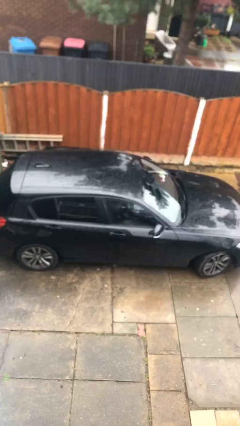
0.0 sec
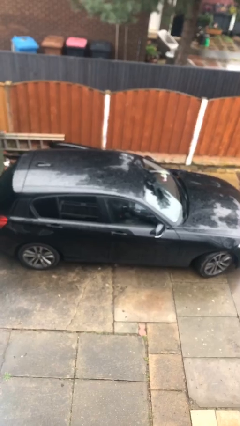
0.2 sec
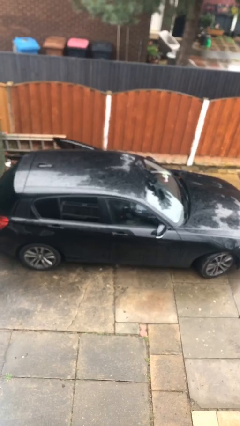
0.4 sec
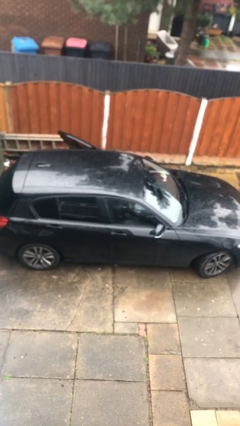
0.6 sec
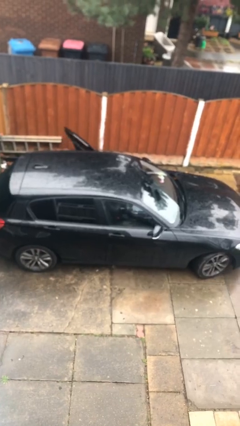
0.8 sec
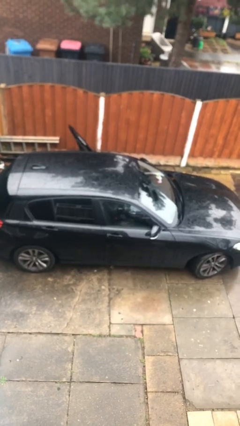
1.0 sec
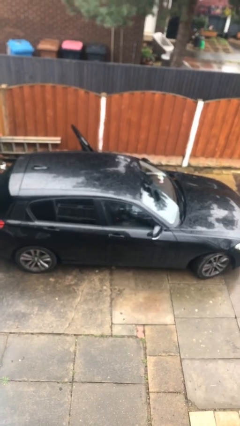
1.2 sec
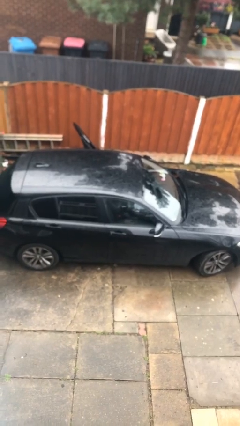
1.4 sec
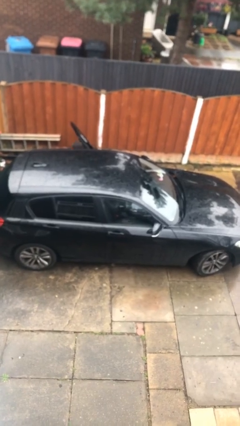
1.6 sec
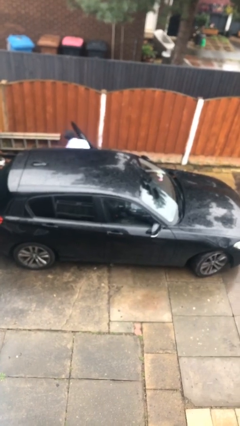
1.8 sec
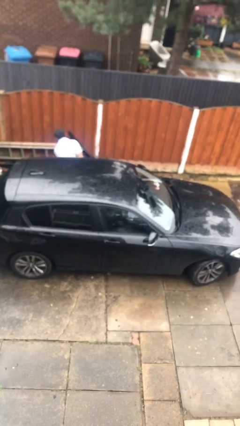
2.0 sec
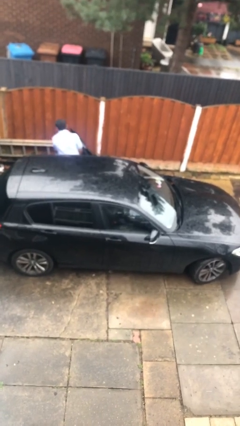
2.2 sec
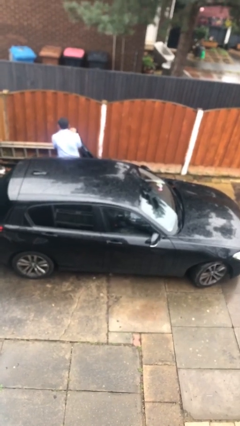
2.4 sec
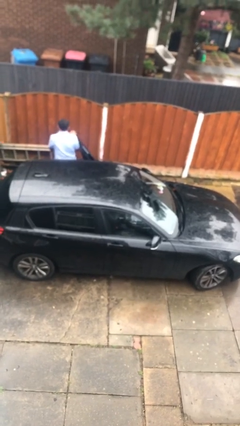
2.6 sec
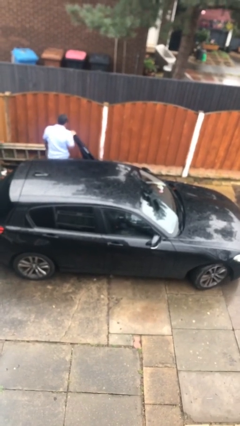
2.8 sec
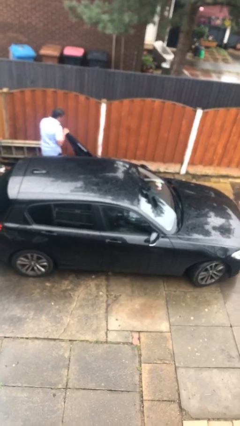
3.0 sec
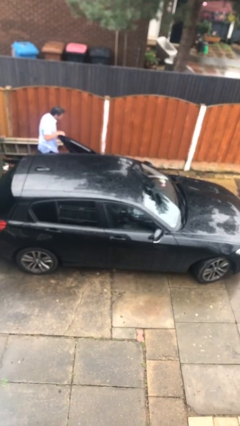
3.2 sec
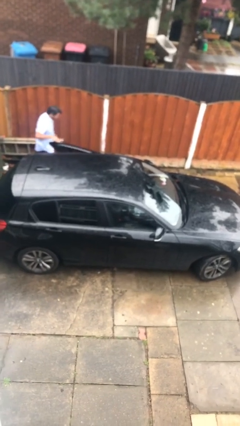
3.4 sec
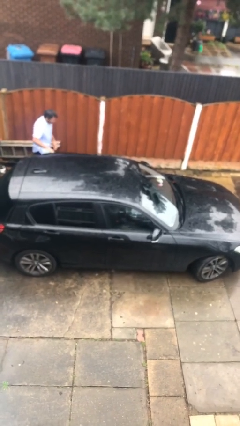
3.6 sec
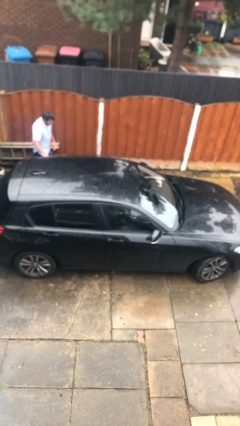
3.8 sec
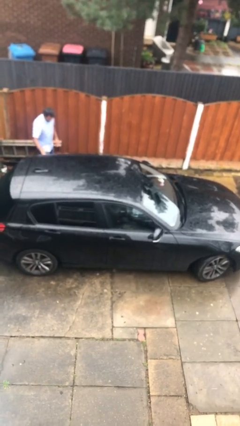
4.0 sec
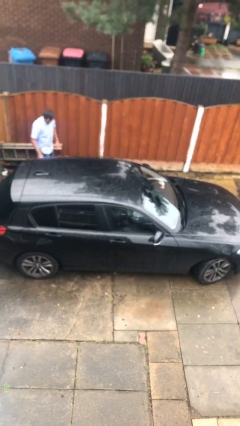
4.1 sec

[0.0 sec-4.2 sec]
car drops off person

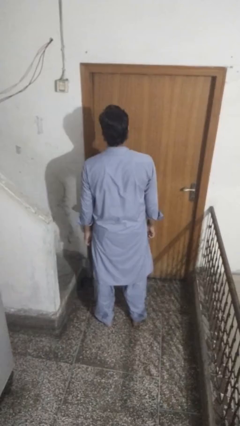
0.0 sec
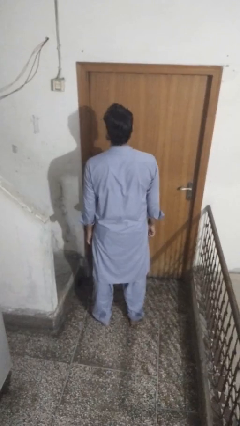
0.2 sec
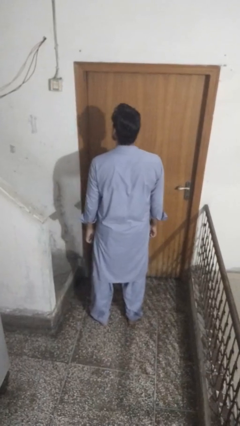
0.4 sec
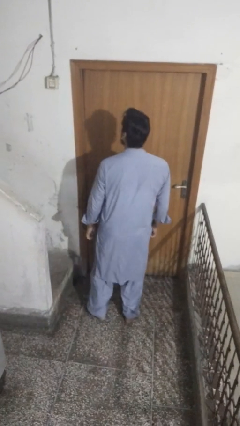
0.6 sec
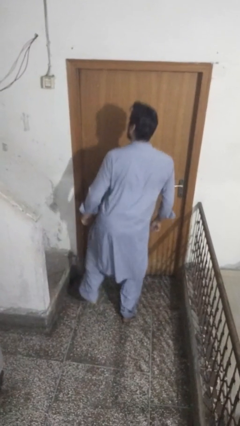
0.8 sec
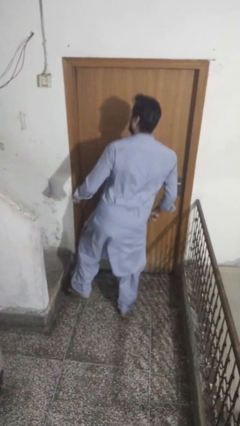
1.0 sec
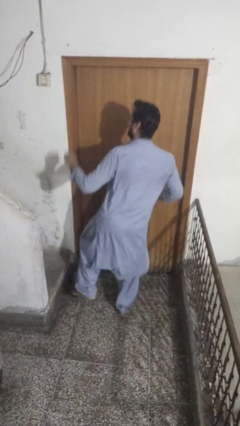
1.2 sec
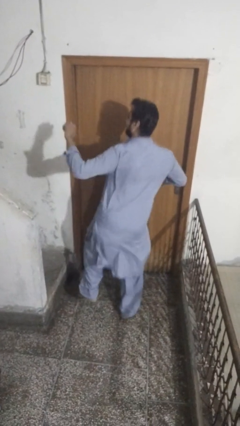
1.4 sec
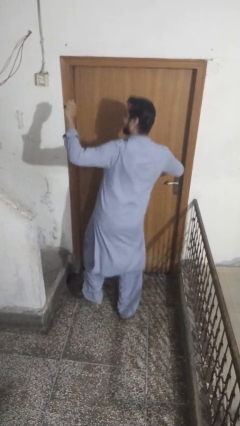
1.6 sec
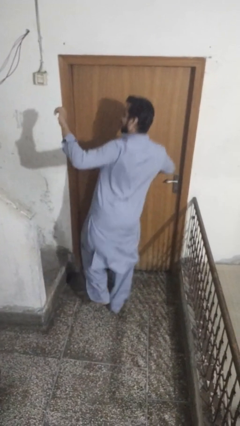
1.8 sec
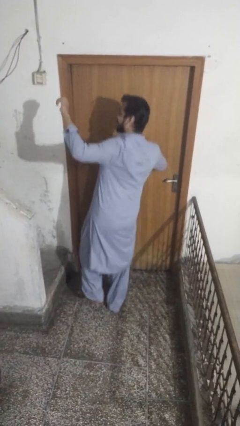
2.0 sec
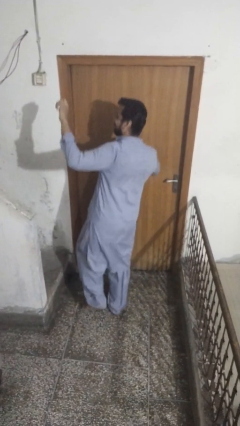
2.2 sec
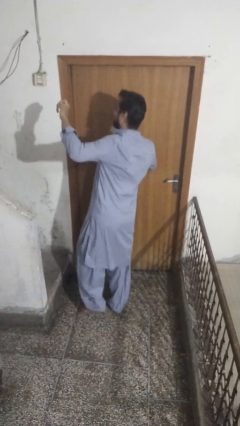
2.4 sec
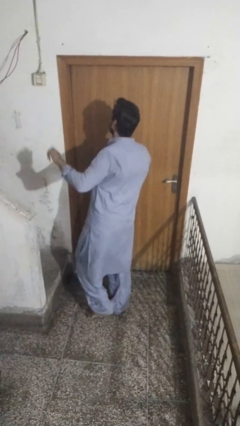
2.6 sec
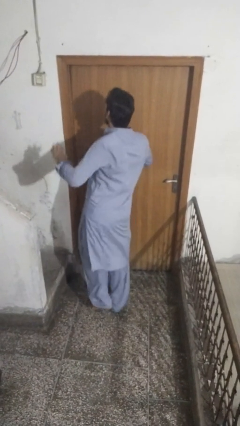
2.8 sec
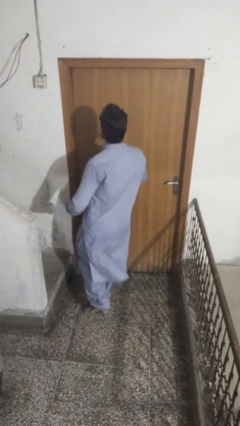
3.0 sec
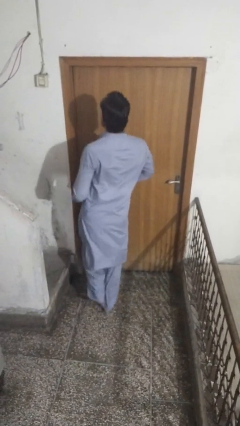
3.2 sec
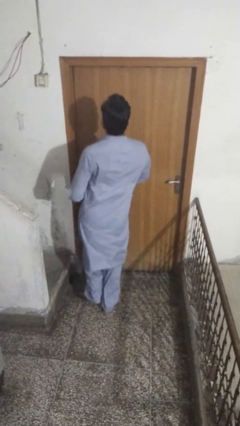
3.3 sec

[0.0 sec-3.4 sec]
person dances in place

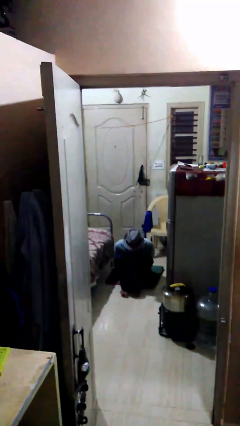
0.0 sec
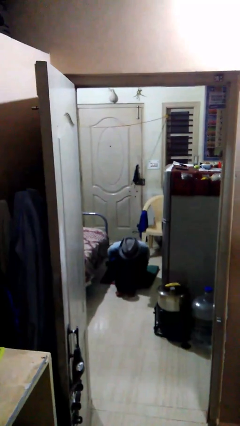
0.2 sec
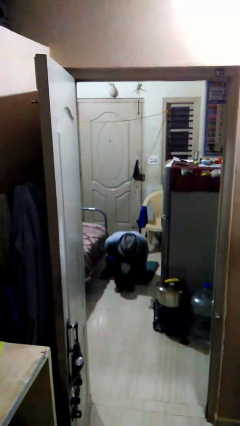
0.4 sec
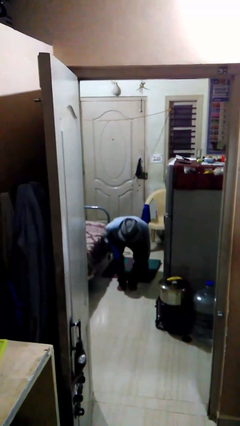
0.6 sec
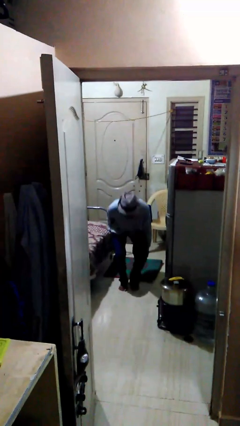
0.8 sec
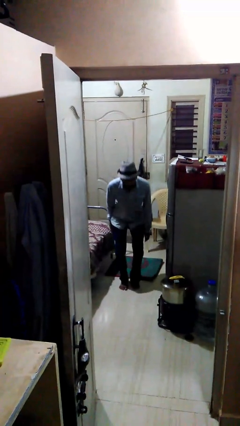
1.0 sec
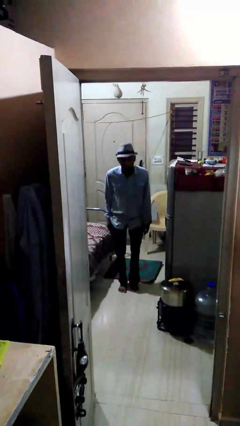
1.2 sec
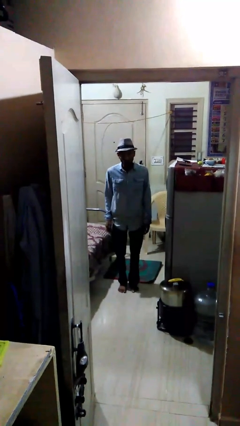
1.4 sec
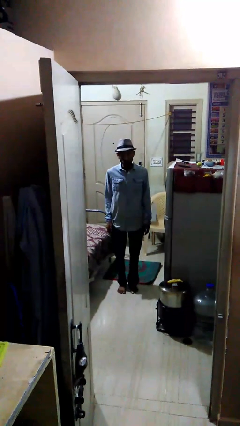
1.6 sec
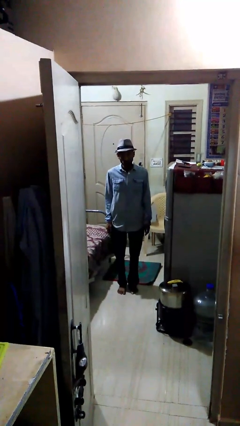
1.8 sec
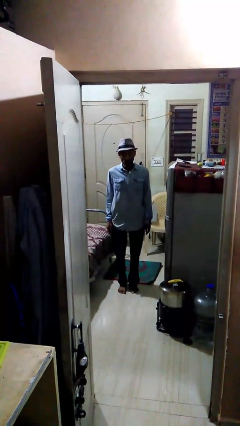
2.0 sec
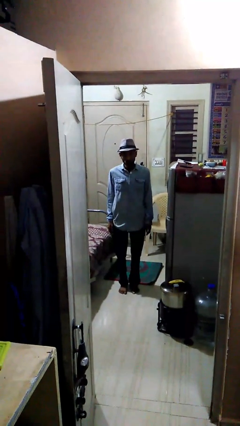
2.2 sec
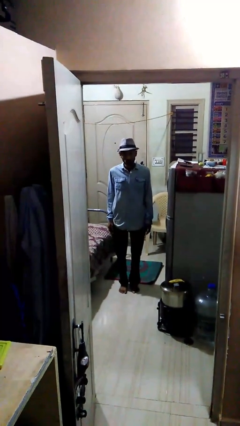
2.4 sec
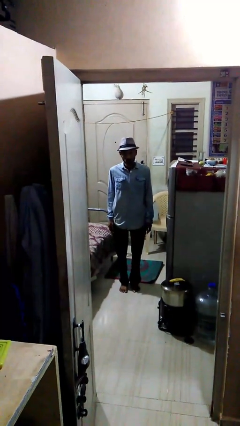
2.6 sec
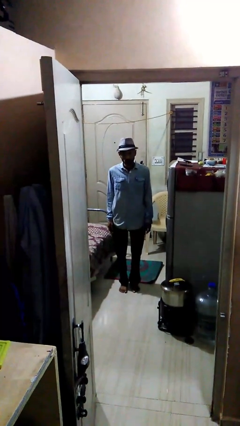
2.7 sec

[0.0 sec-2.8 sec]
person stands up

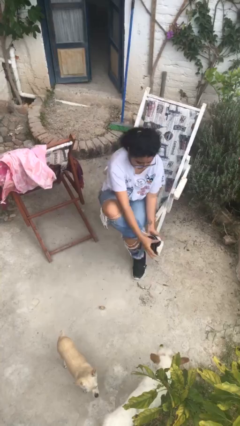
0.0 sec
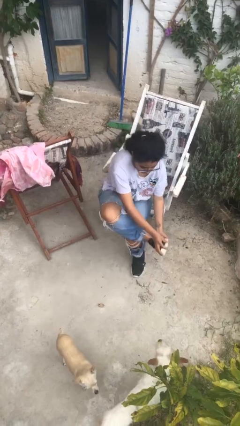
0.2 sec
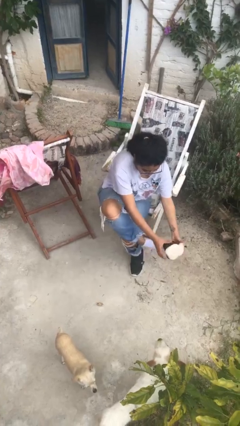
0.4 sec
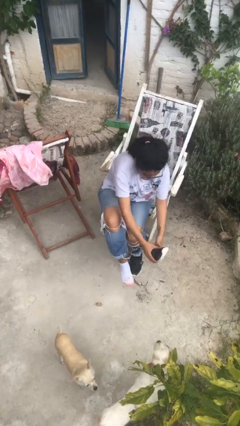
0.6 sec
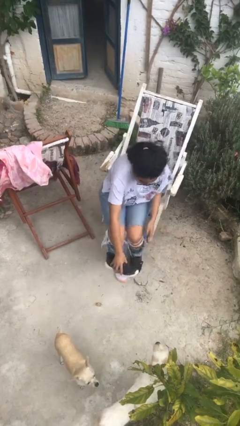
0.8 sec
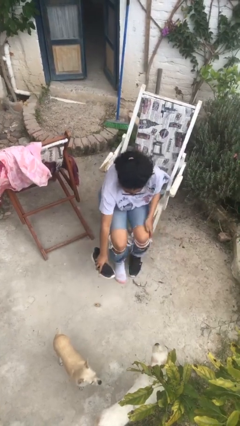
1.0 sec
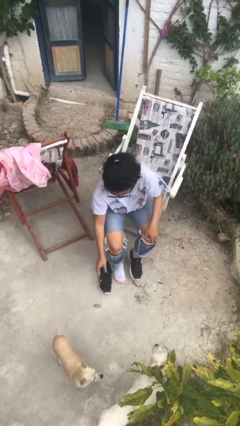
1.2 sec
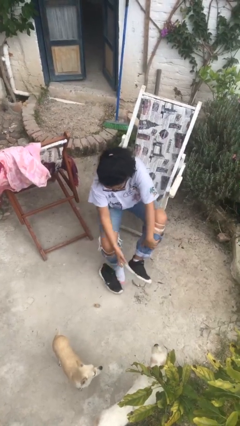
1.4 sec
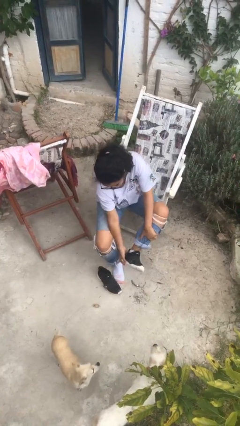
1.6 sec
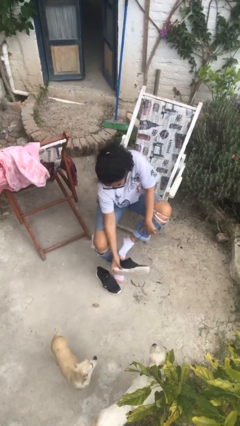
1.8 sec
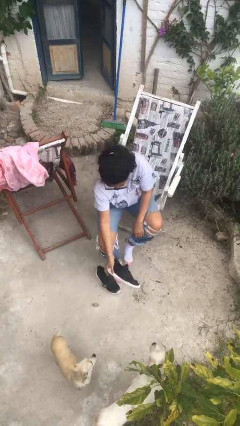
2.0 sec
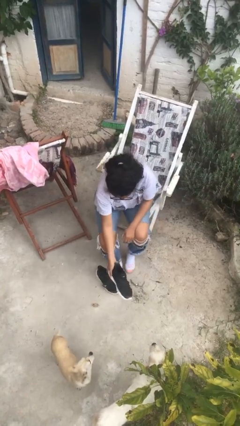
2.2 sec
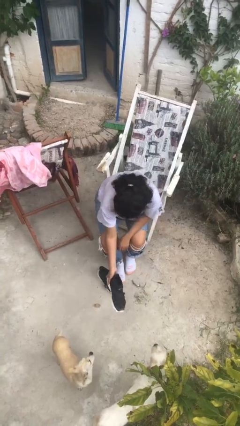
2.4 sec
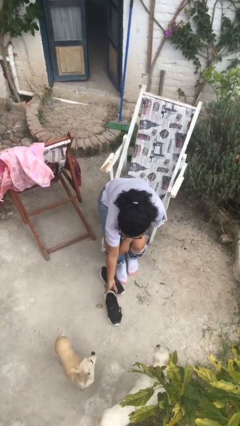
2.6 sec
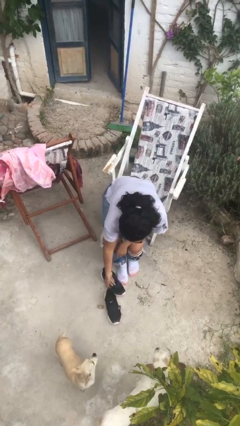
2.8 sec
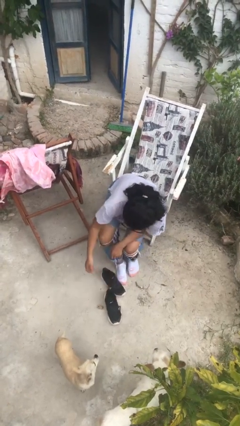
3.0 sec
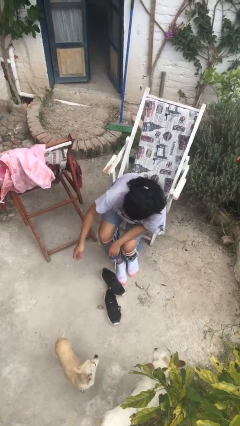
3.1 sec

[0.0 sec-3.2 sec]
person takes off shoes

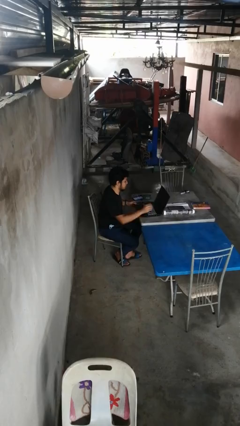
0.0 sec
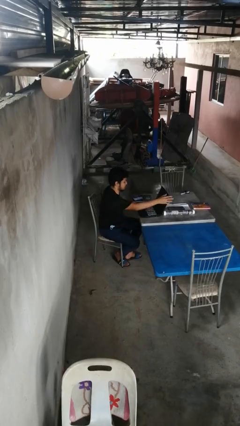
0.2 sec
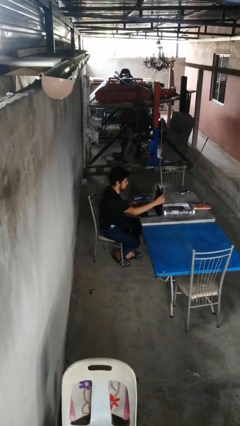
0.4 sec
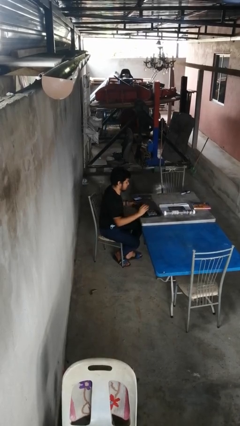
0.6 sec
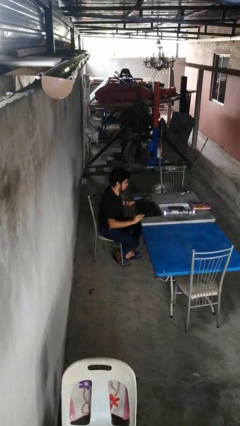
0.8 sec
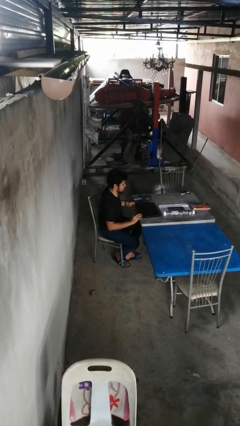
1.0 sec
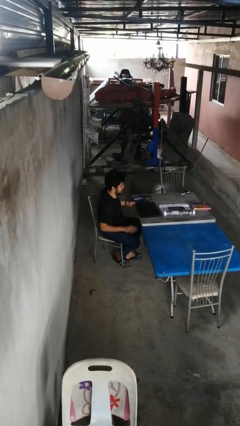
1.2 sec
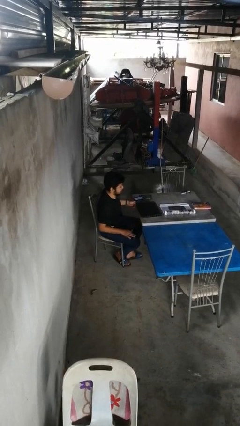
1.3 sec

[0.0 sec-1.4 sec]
person closes laptop

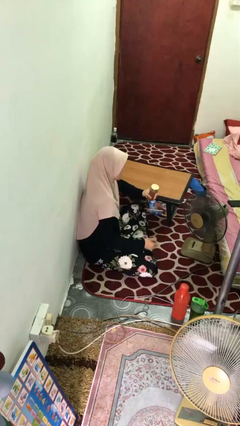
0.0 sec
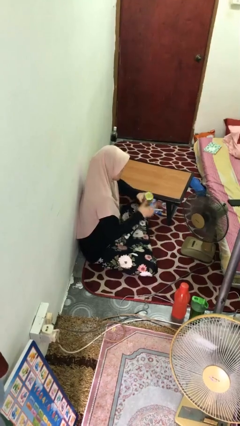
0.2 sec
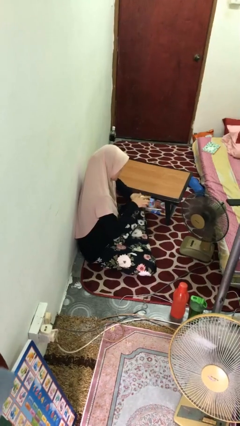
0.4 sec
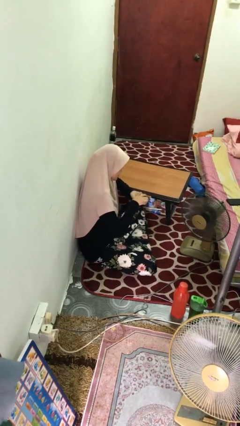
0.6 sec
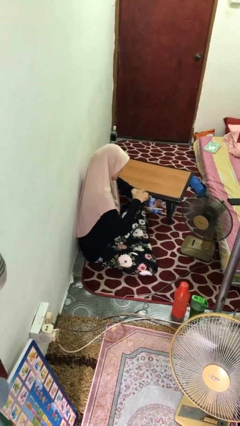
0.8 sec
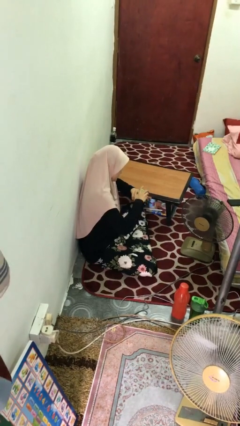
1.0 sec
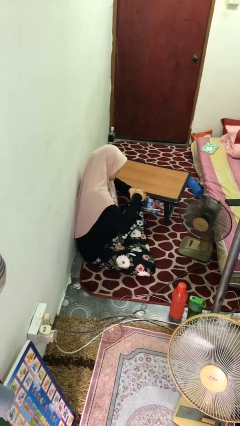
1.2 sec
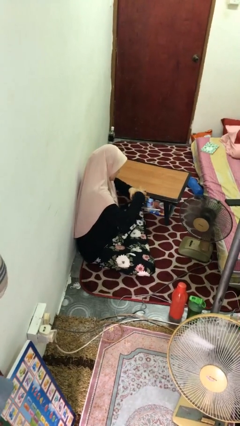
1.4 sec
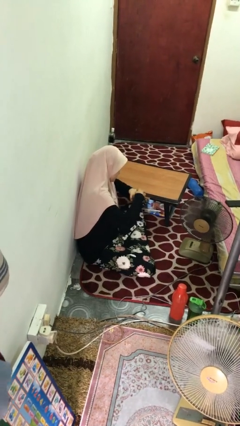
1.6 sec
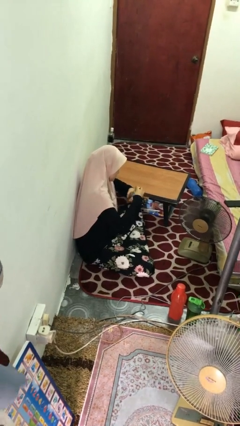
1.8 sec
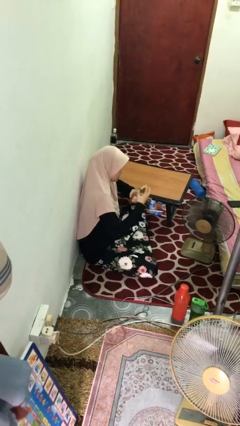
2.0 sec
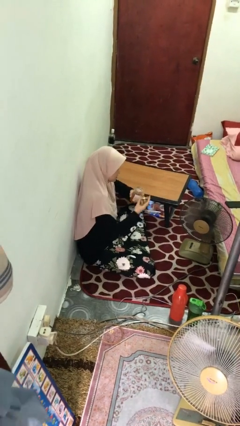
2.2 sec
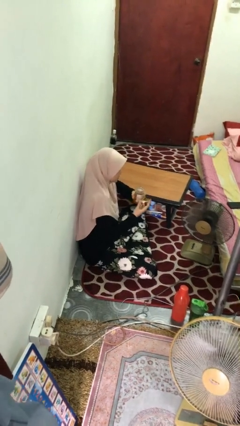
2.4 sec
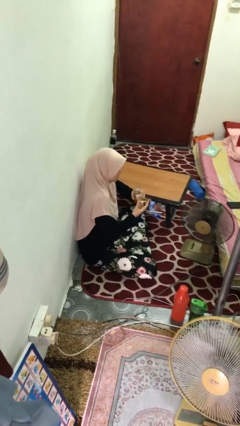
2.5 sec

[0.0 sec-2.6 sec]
person opens jar
